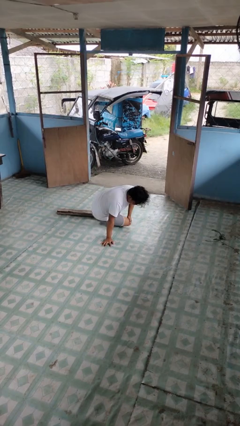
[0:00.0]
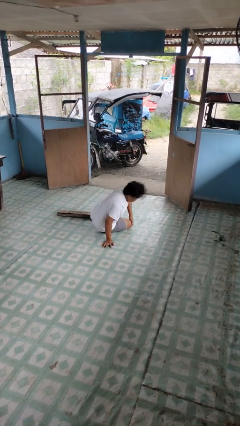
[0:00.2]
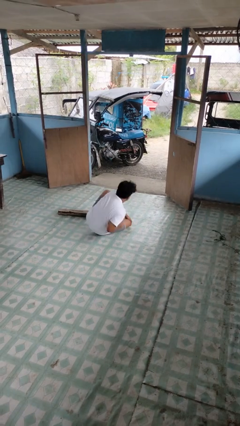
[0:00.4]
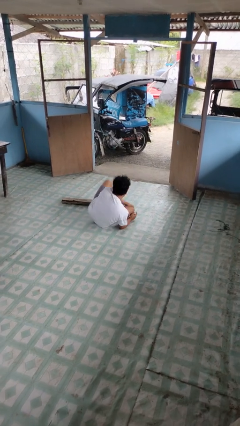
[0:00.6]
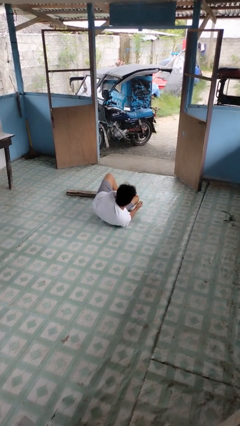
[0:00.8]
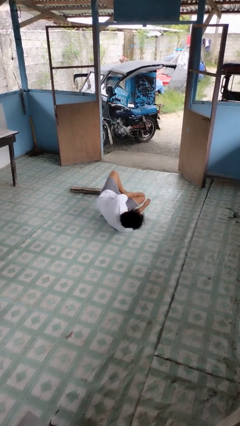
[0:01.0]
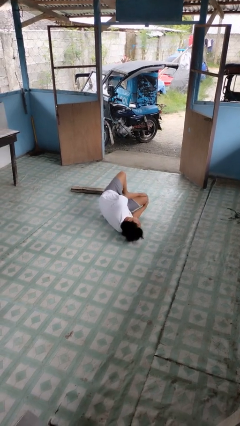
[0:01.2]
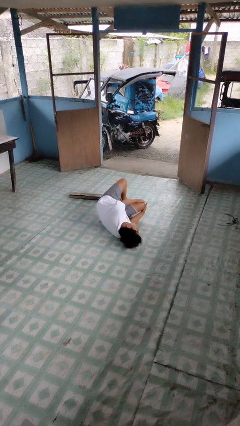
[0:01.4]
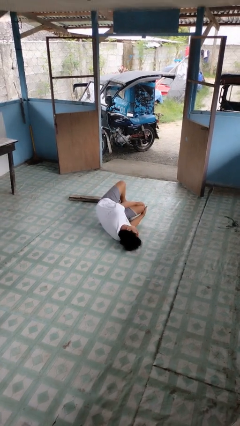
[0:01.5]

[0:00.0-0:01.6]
person lies down on floor

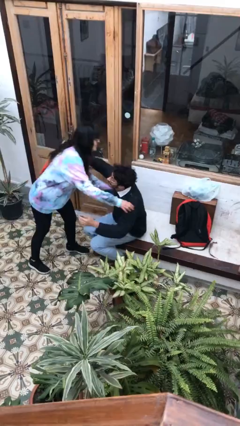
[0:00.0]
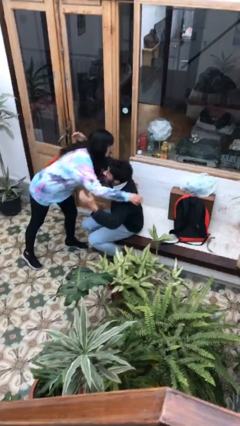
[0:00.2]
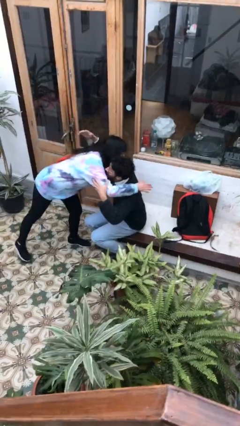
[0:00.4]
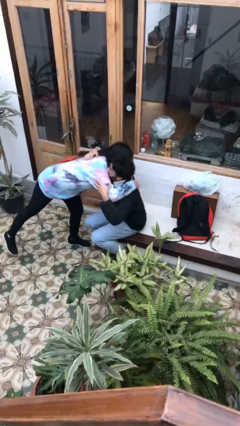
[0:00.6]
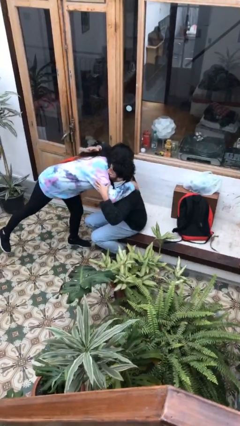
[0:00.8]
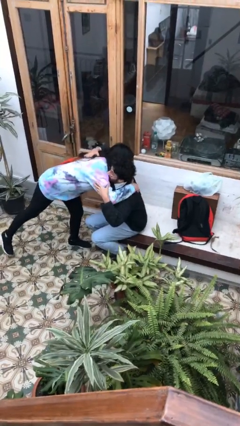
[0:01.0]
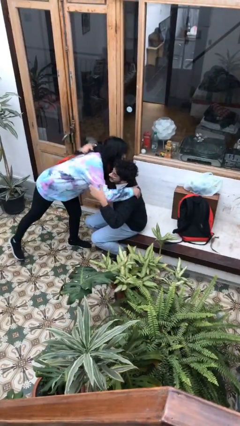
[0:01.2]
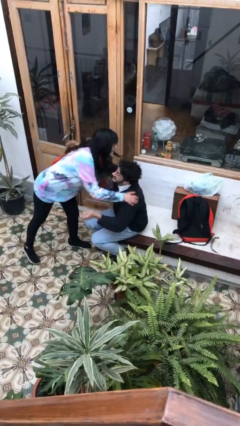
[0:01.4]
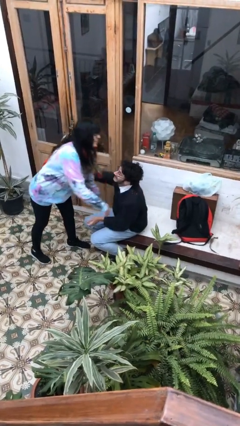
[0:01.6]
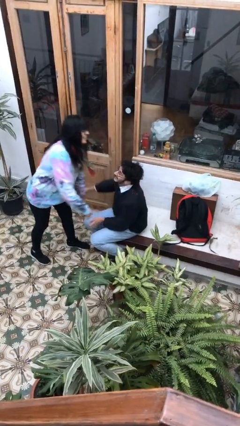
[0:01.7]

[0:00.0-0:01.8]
person embraces person

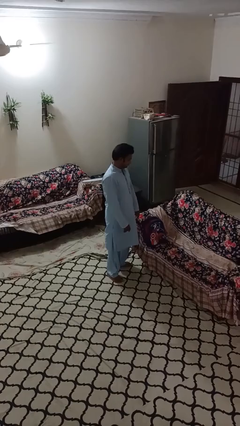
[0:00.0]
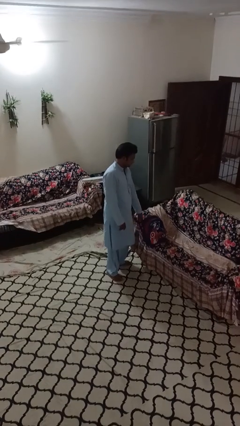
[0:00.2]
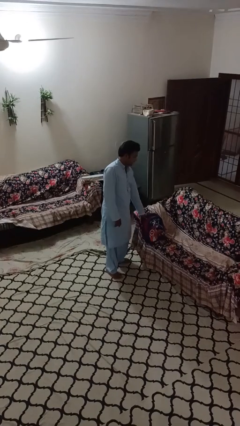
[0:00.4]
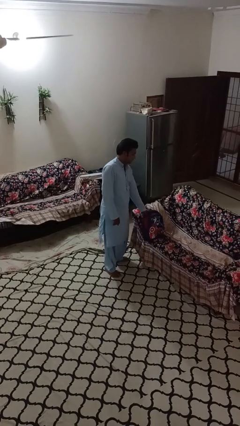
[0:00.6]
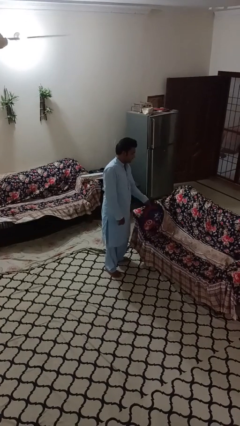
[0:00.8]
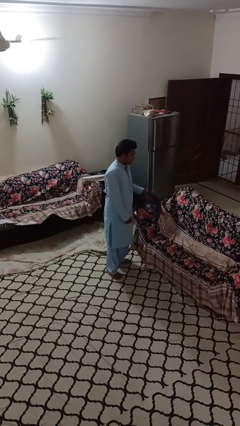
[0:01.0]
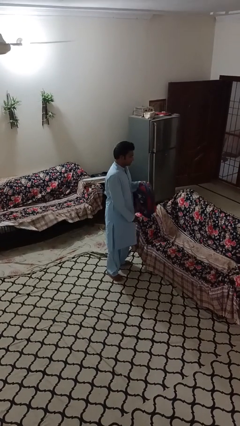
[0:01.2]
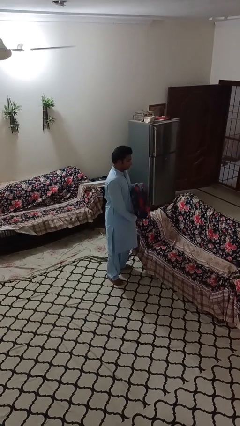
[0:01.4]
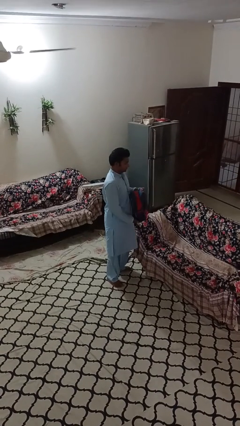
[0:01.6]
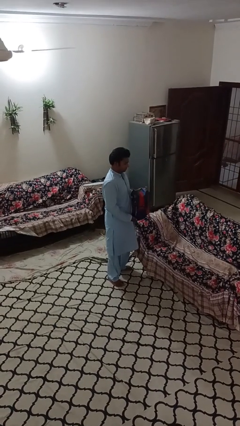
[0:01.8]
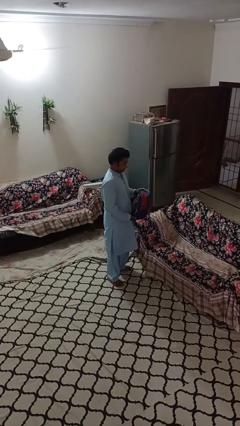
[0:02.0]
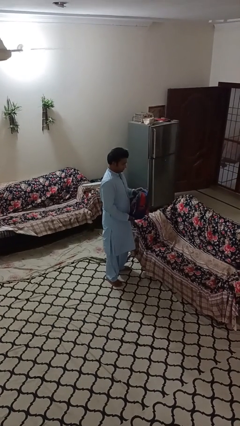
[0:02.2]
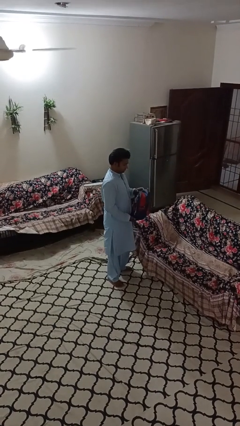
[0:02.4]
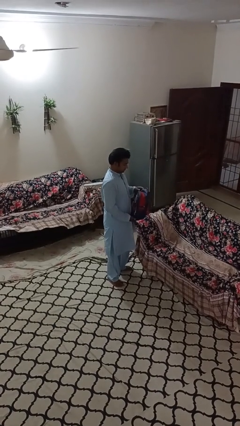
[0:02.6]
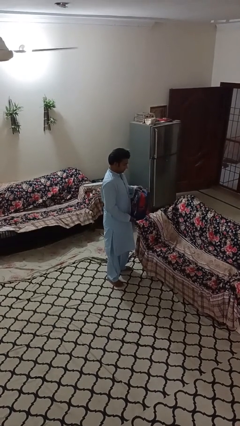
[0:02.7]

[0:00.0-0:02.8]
person picks up object from couch

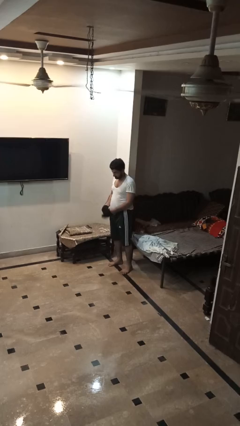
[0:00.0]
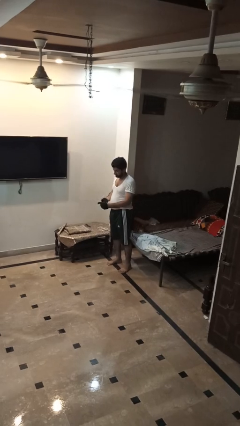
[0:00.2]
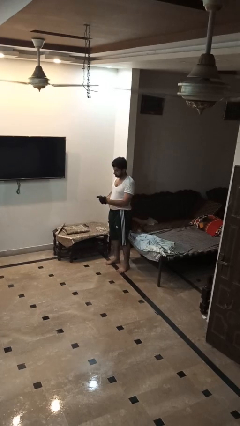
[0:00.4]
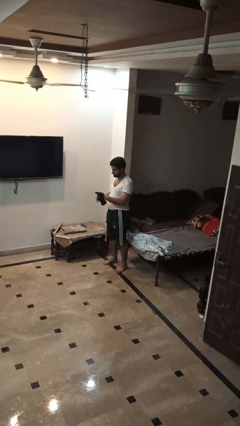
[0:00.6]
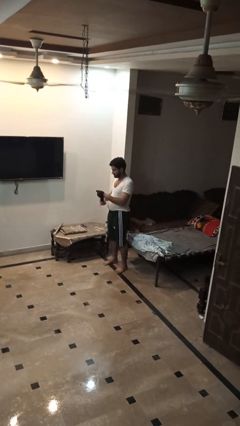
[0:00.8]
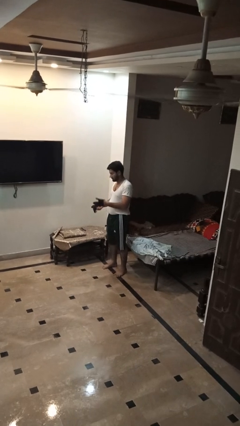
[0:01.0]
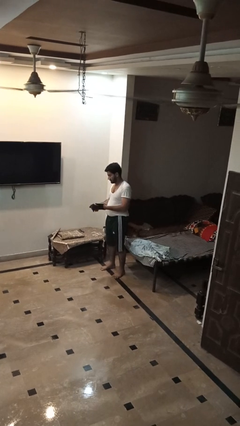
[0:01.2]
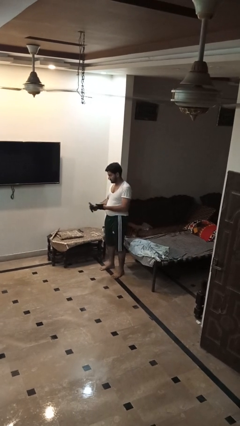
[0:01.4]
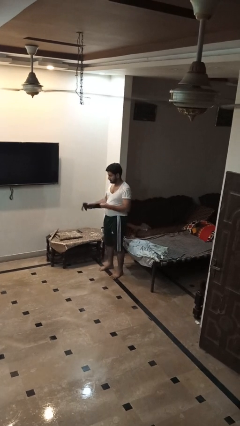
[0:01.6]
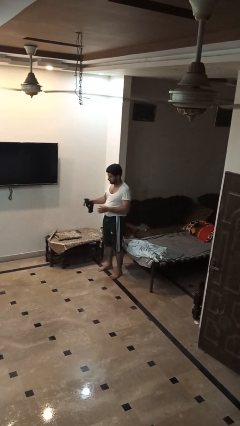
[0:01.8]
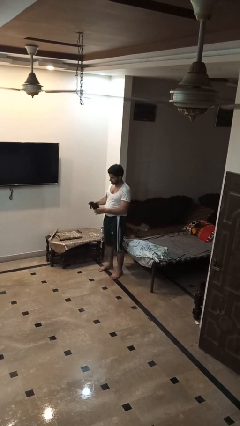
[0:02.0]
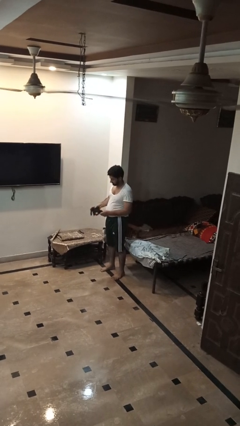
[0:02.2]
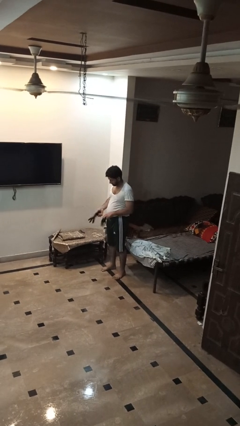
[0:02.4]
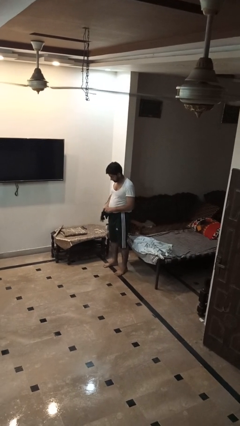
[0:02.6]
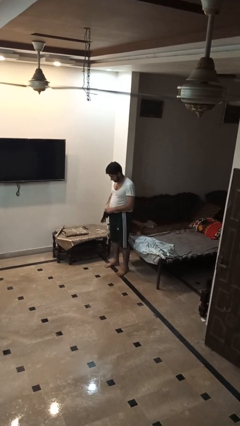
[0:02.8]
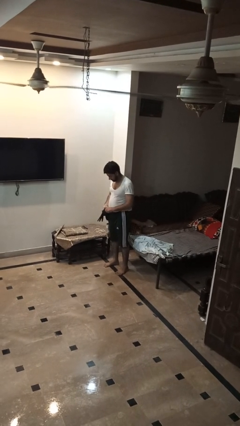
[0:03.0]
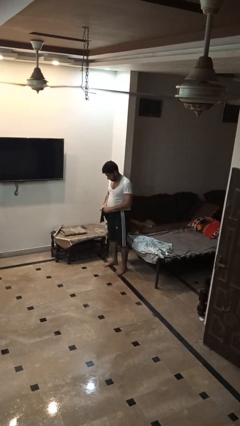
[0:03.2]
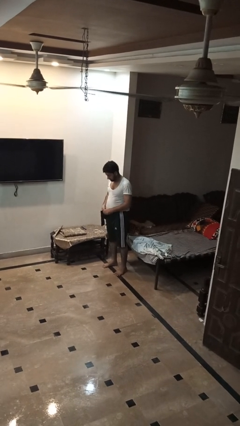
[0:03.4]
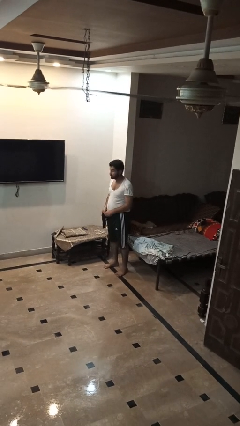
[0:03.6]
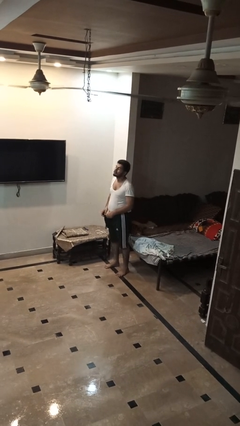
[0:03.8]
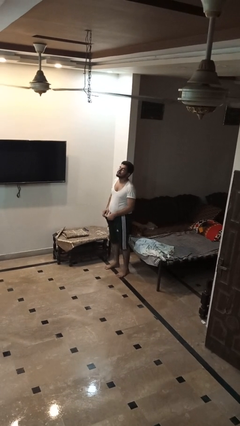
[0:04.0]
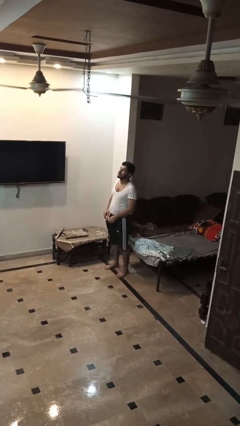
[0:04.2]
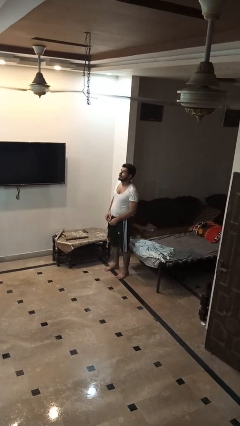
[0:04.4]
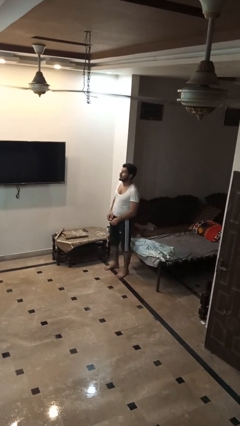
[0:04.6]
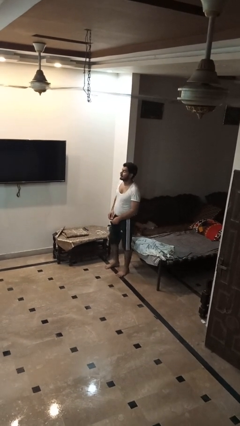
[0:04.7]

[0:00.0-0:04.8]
person takes off gloves

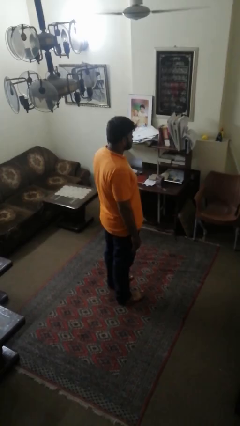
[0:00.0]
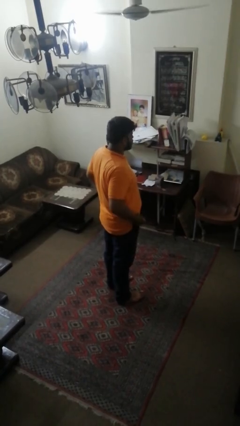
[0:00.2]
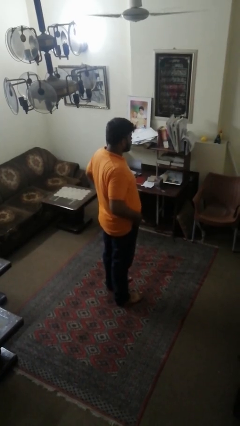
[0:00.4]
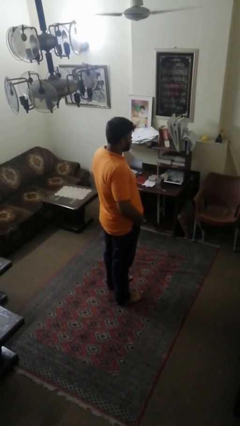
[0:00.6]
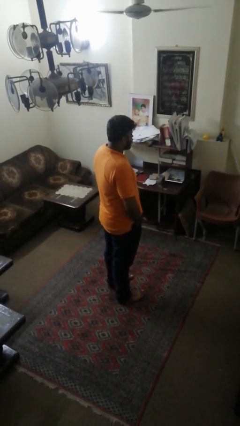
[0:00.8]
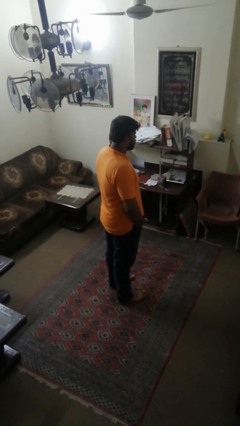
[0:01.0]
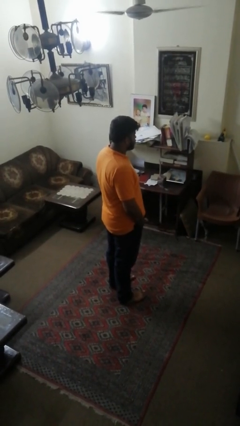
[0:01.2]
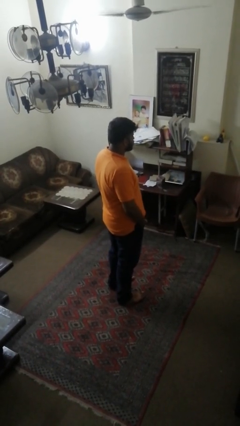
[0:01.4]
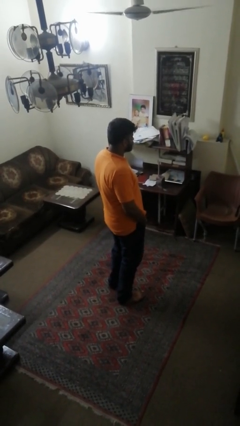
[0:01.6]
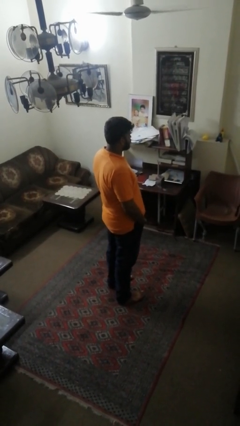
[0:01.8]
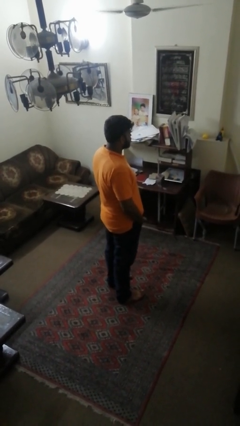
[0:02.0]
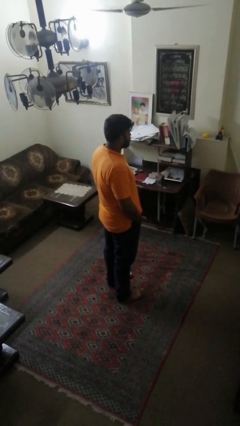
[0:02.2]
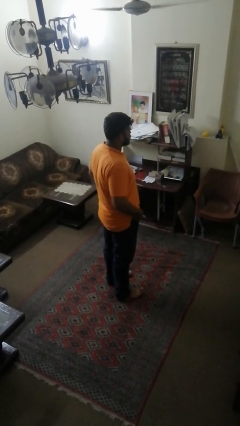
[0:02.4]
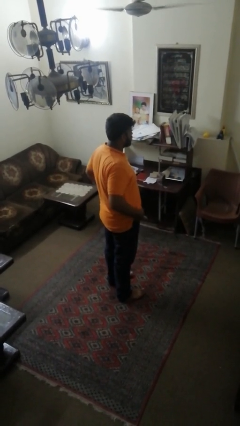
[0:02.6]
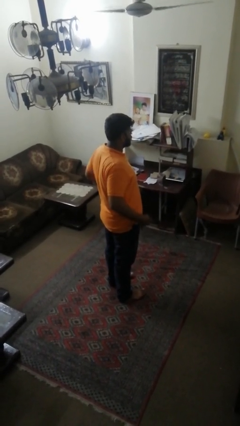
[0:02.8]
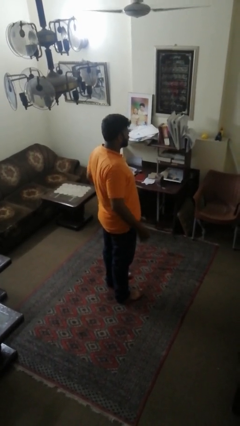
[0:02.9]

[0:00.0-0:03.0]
person puts hands in back pockets

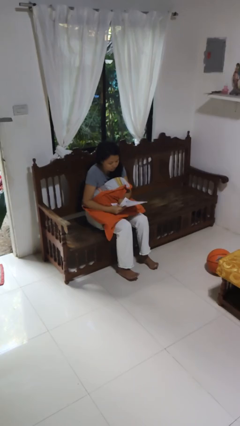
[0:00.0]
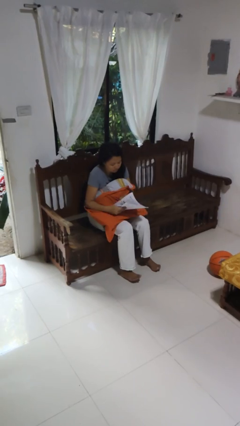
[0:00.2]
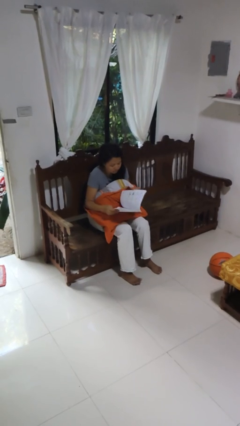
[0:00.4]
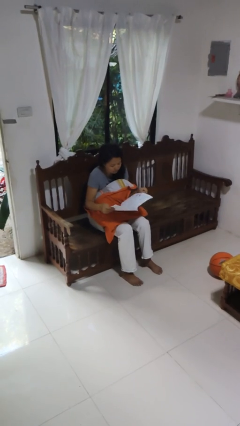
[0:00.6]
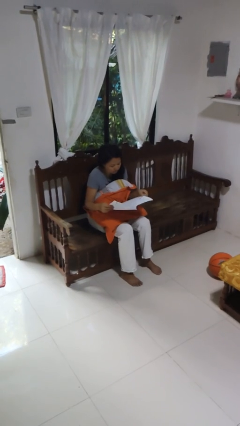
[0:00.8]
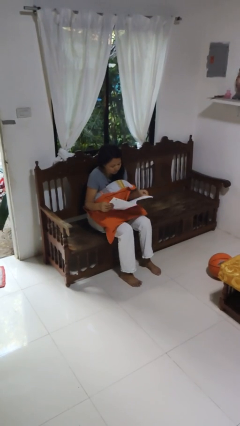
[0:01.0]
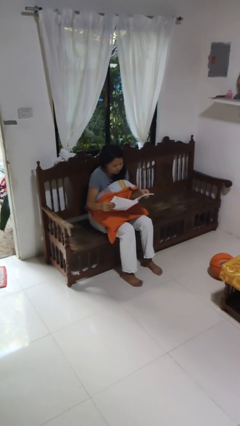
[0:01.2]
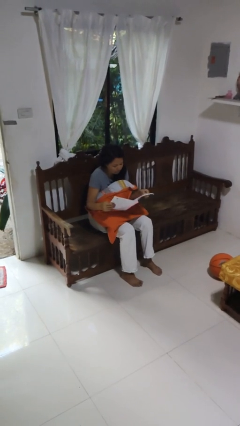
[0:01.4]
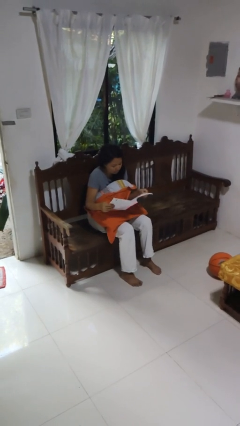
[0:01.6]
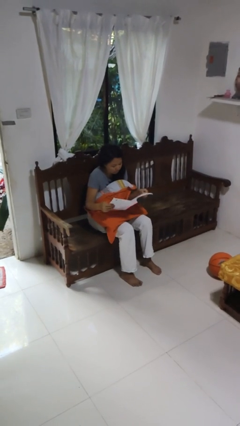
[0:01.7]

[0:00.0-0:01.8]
person reads newspaper

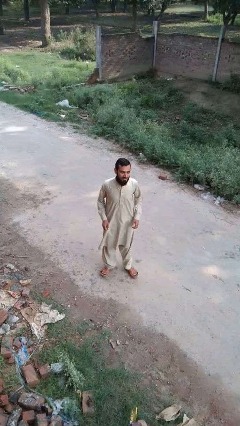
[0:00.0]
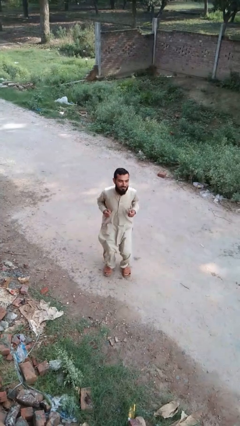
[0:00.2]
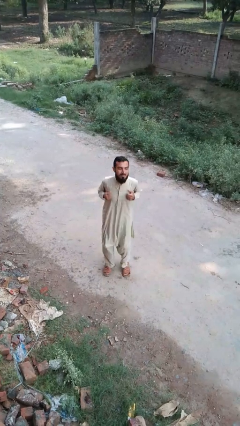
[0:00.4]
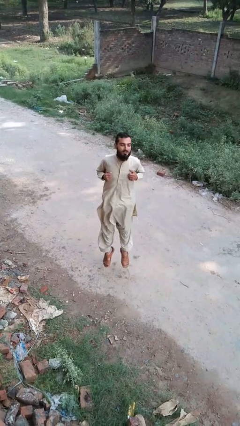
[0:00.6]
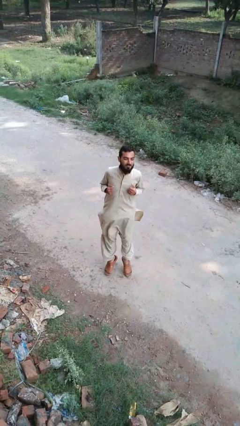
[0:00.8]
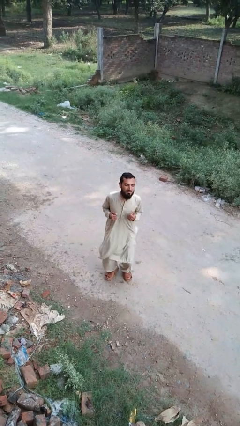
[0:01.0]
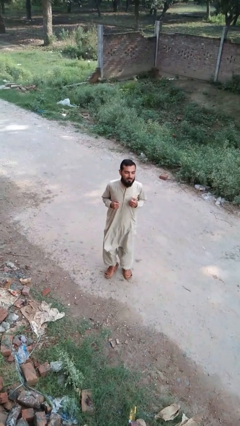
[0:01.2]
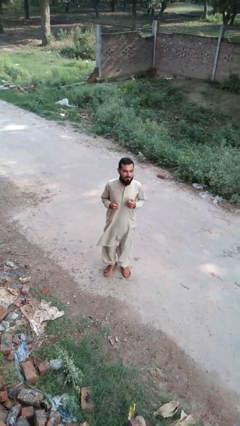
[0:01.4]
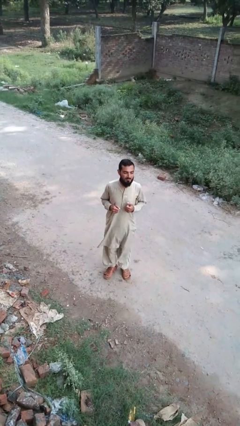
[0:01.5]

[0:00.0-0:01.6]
person jumps
